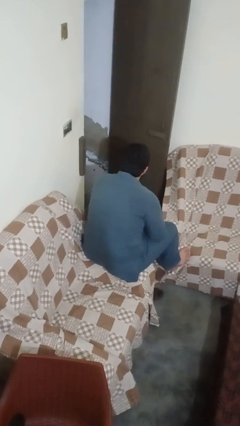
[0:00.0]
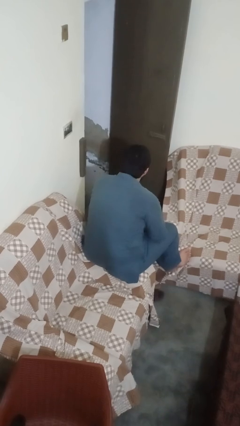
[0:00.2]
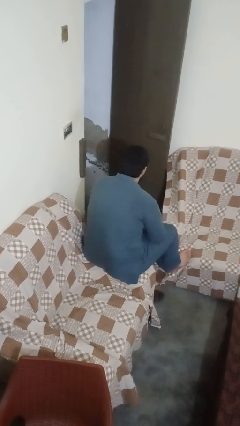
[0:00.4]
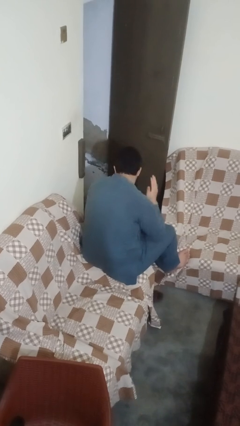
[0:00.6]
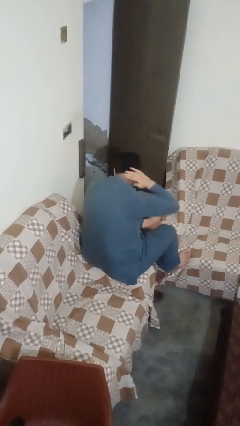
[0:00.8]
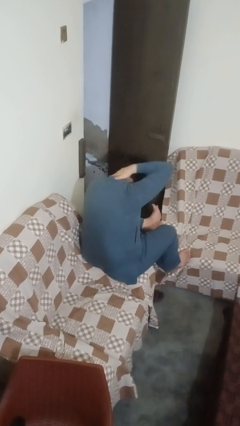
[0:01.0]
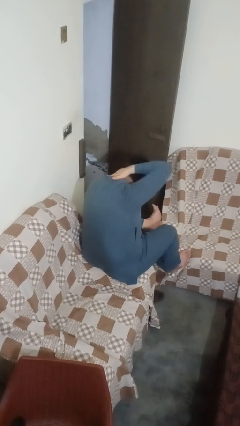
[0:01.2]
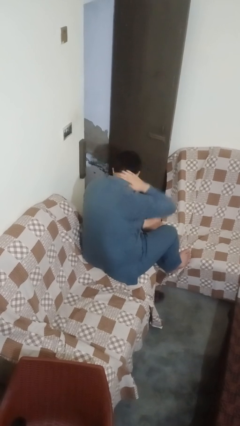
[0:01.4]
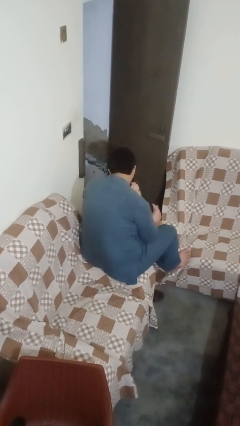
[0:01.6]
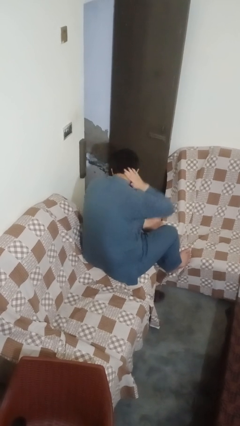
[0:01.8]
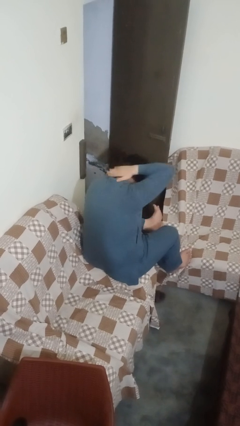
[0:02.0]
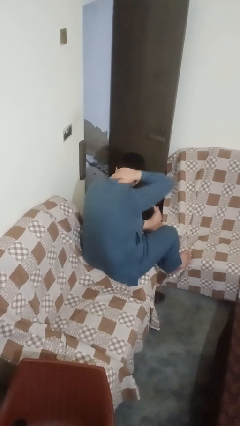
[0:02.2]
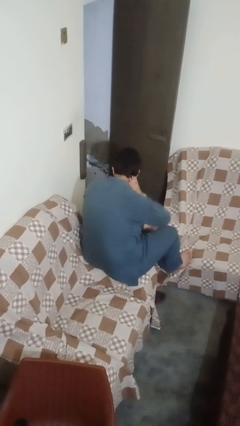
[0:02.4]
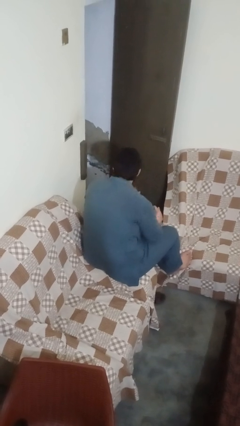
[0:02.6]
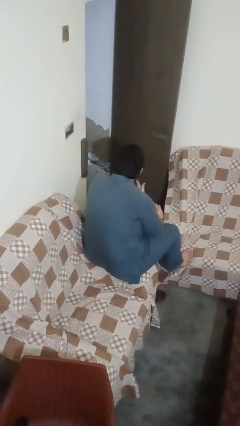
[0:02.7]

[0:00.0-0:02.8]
person rubs neck

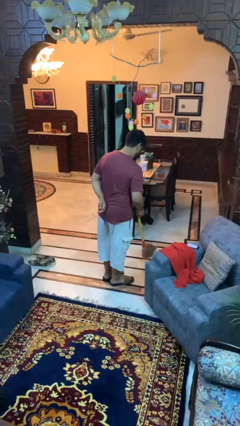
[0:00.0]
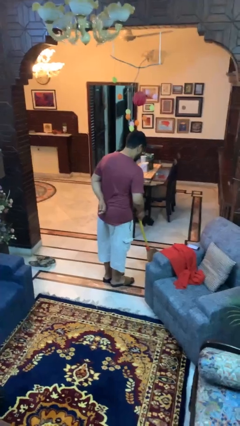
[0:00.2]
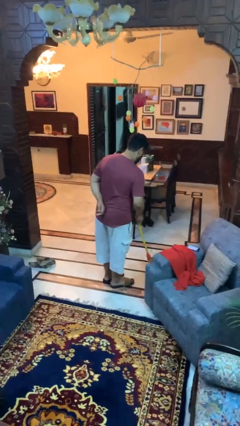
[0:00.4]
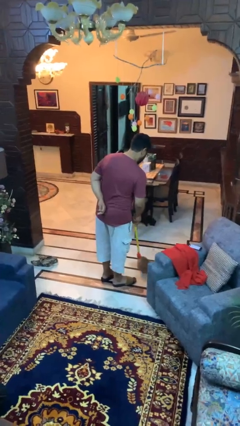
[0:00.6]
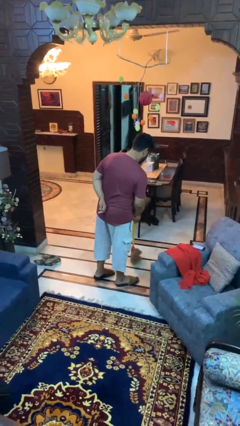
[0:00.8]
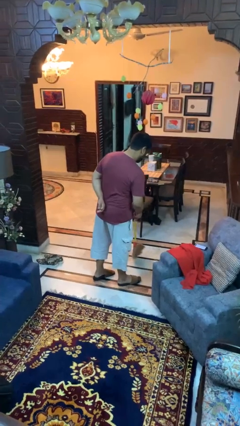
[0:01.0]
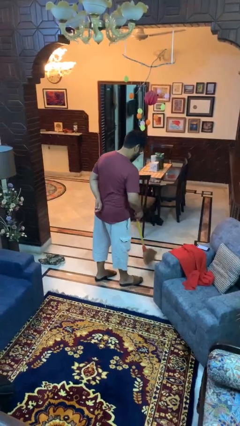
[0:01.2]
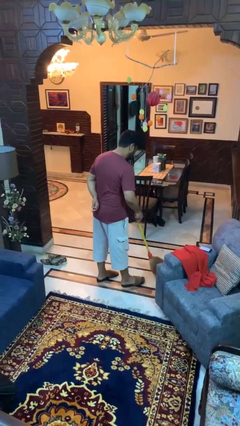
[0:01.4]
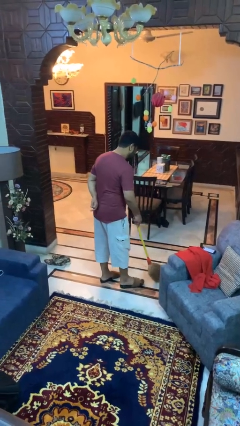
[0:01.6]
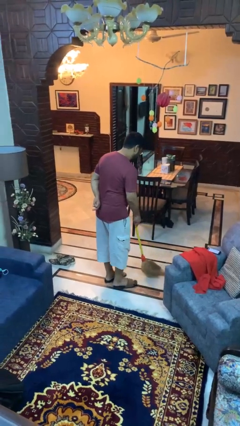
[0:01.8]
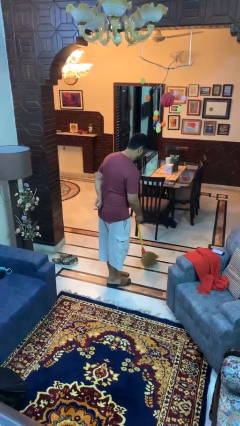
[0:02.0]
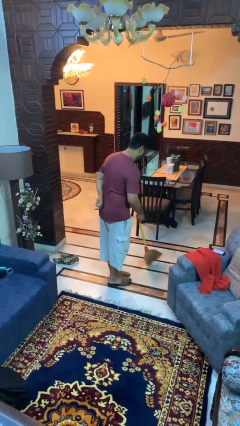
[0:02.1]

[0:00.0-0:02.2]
person sweeps floor

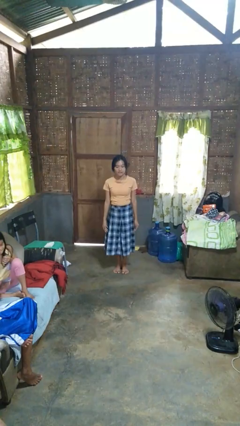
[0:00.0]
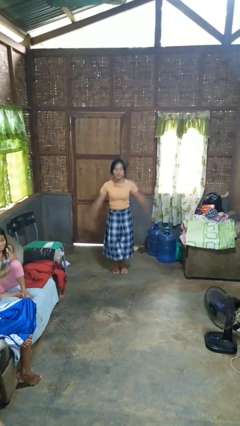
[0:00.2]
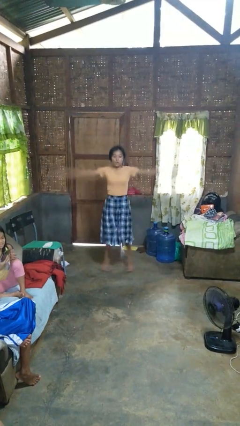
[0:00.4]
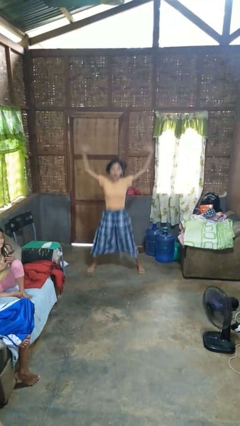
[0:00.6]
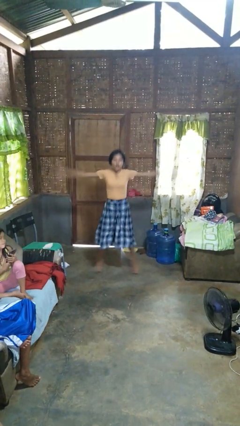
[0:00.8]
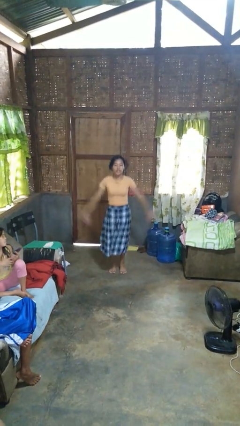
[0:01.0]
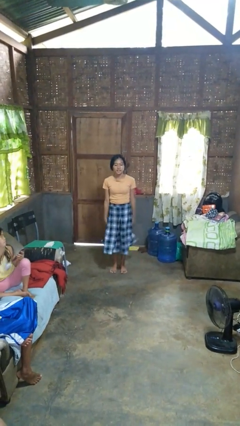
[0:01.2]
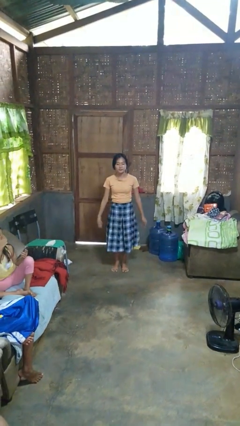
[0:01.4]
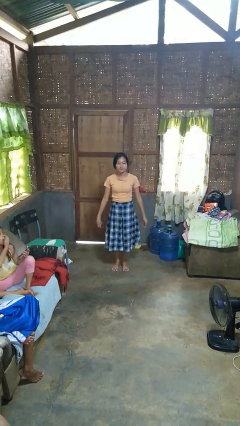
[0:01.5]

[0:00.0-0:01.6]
person exercises with jumping jacks

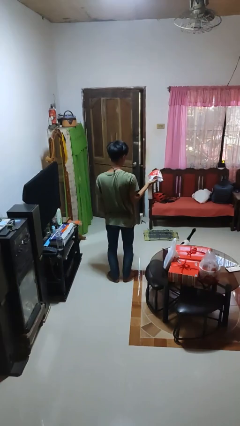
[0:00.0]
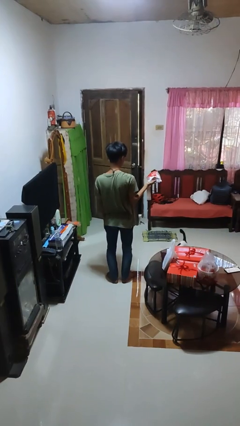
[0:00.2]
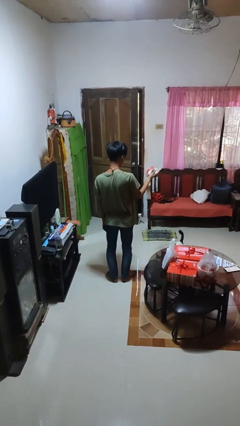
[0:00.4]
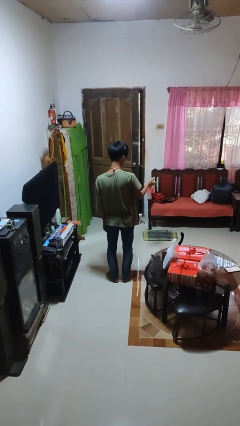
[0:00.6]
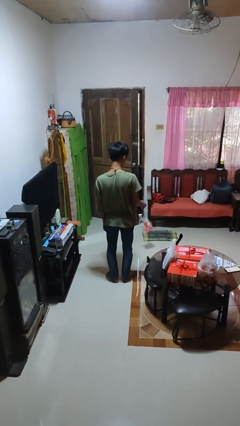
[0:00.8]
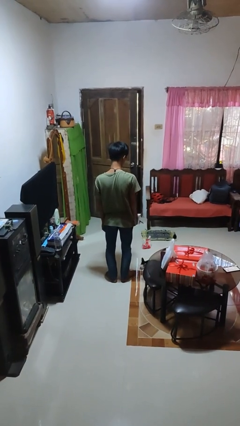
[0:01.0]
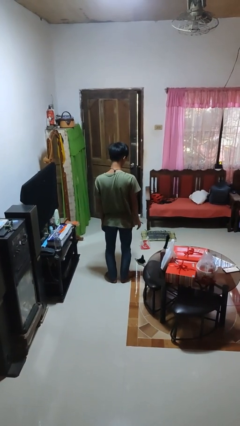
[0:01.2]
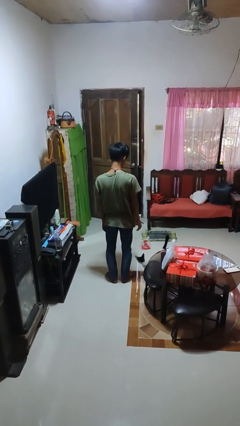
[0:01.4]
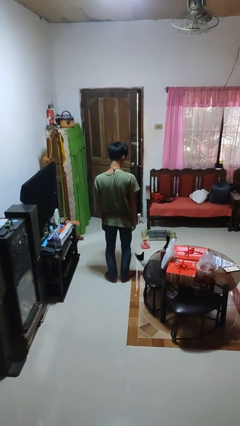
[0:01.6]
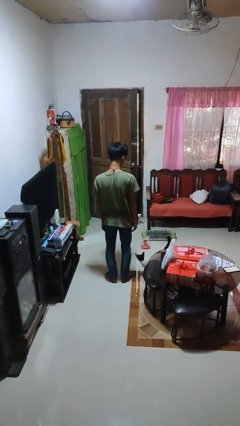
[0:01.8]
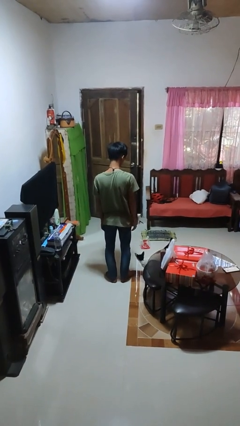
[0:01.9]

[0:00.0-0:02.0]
person throws object to ground

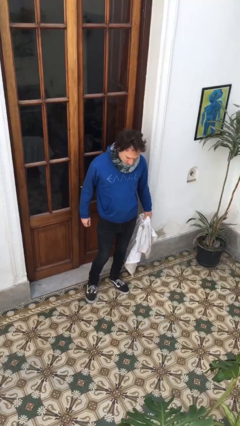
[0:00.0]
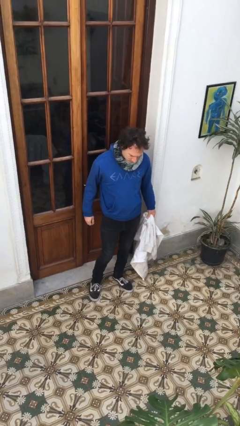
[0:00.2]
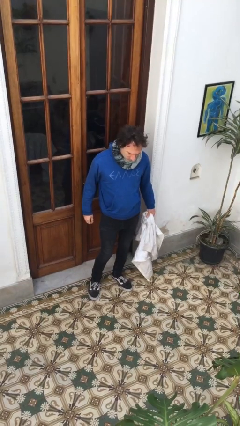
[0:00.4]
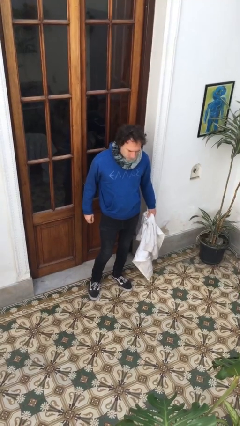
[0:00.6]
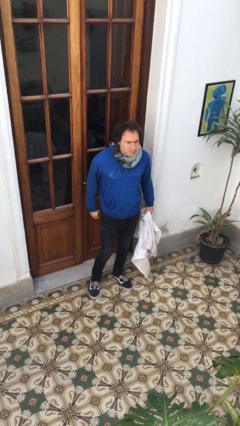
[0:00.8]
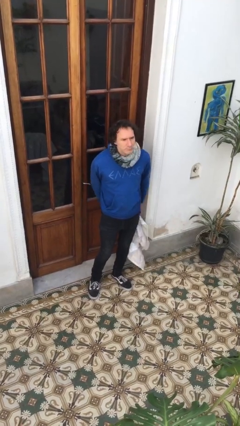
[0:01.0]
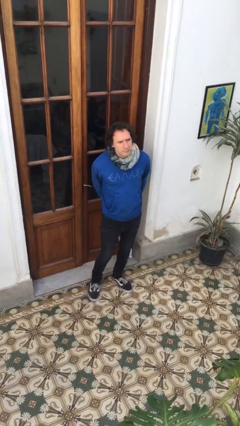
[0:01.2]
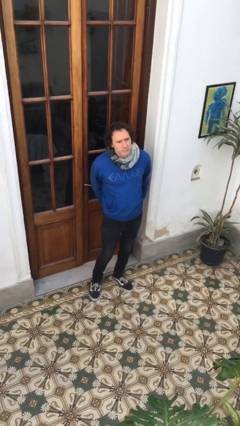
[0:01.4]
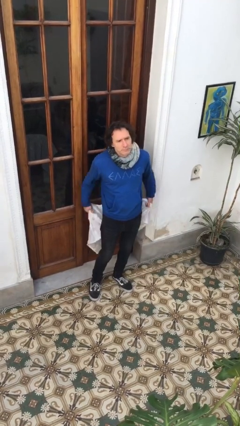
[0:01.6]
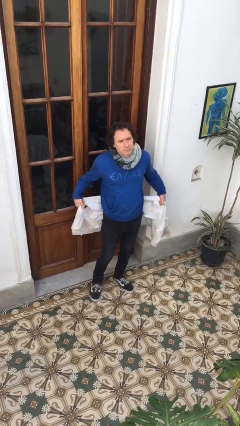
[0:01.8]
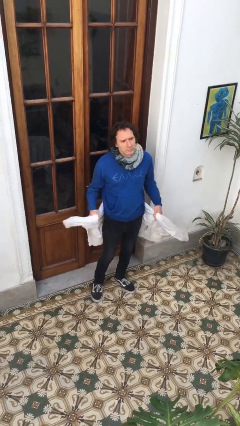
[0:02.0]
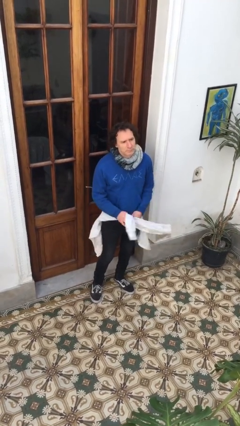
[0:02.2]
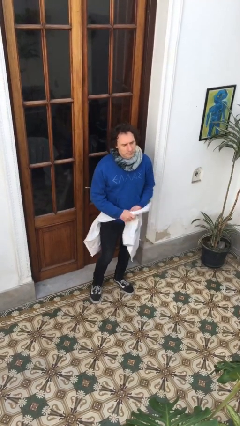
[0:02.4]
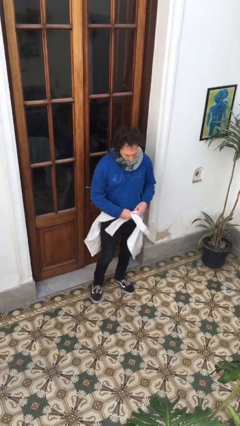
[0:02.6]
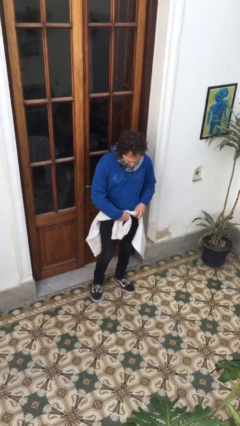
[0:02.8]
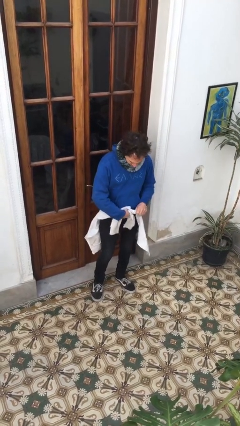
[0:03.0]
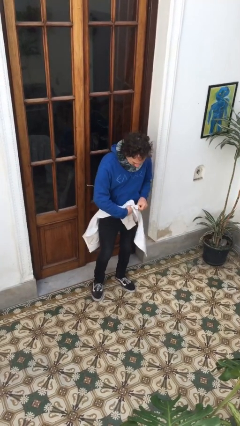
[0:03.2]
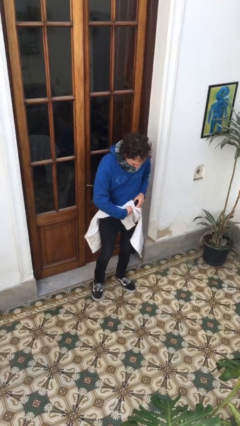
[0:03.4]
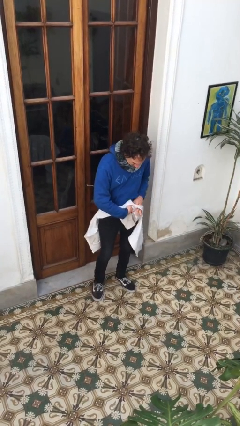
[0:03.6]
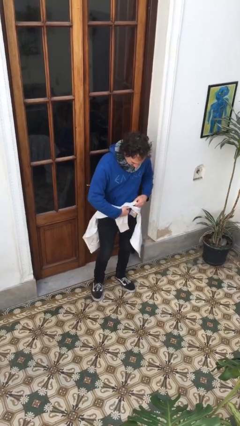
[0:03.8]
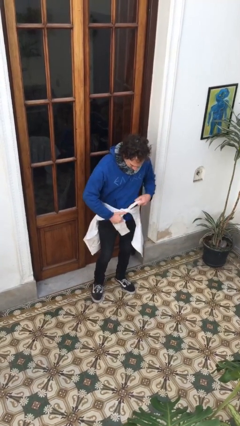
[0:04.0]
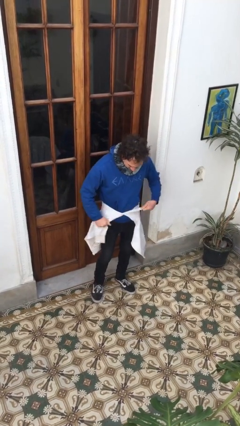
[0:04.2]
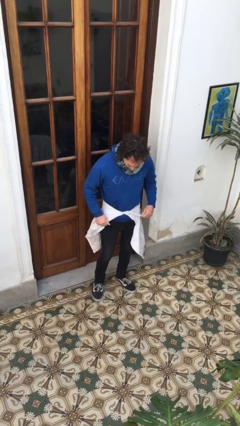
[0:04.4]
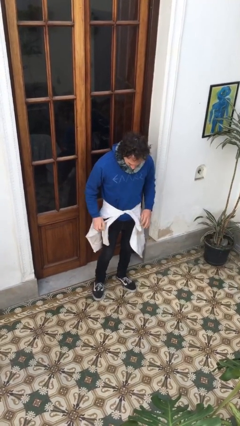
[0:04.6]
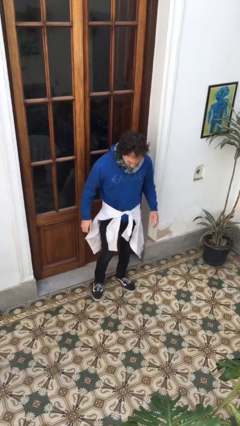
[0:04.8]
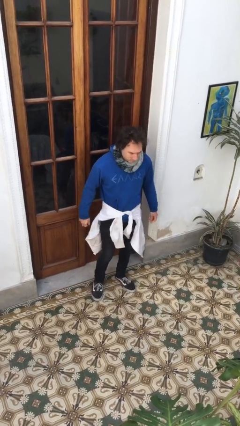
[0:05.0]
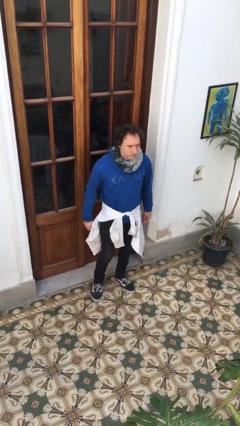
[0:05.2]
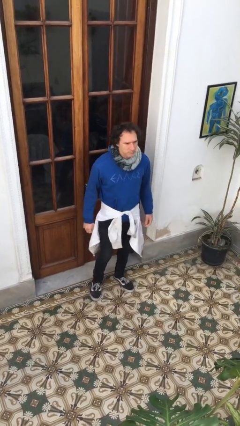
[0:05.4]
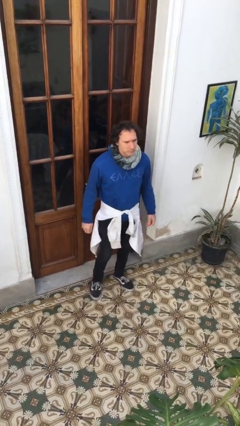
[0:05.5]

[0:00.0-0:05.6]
person ties jacket around waist

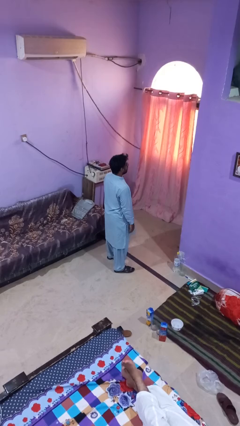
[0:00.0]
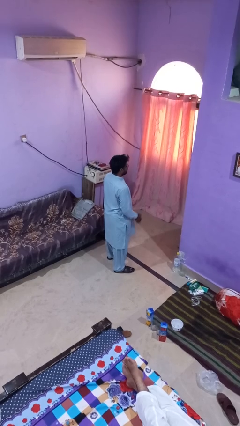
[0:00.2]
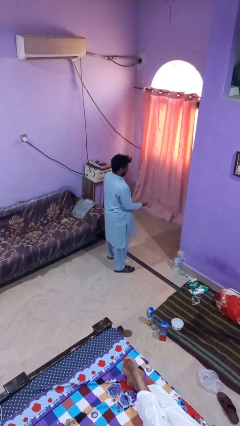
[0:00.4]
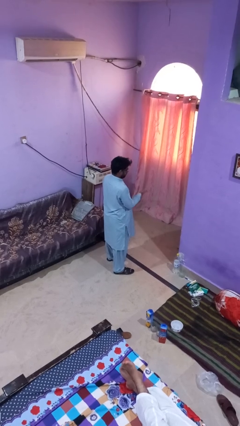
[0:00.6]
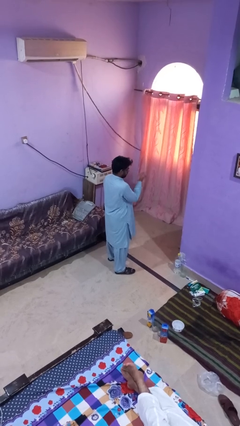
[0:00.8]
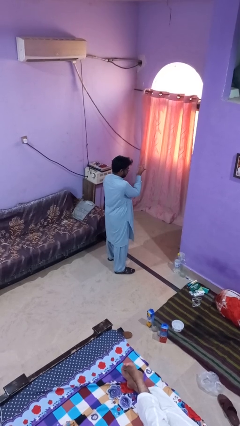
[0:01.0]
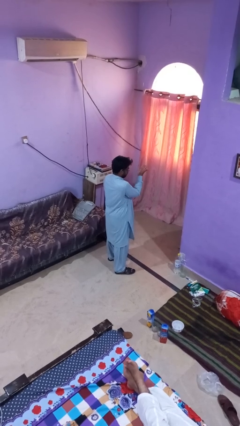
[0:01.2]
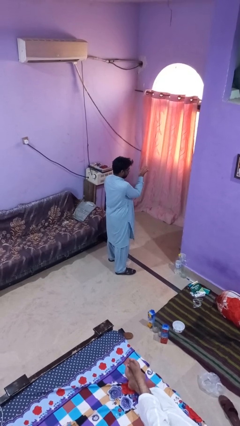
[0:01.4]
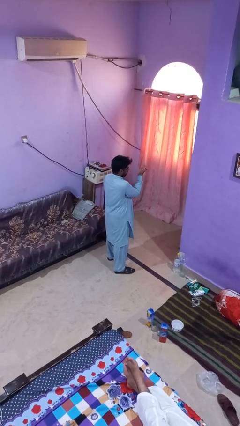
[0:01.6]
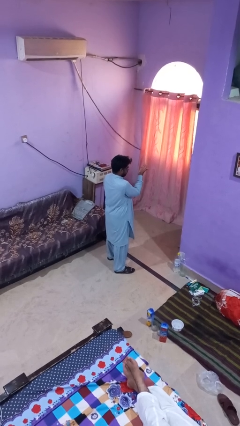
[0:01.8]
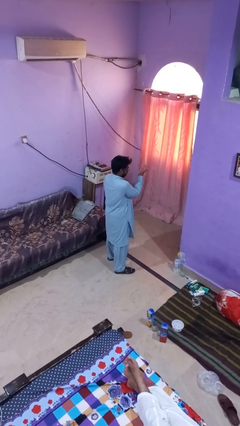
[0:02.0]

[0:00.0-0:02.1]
person gestures swipe up

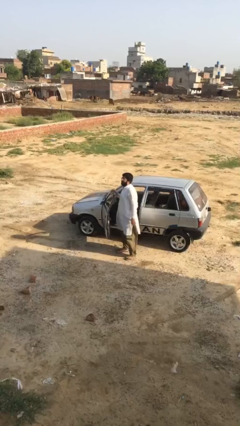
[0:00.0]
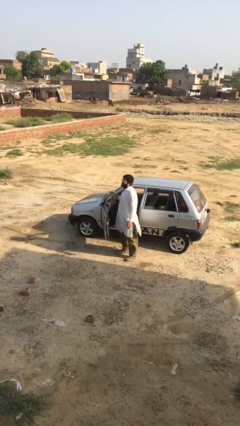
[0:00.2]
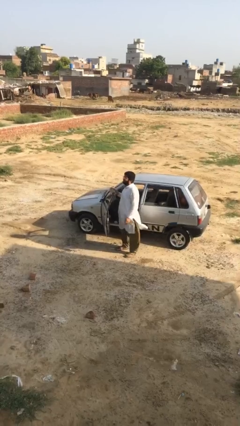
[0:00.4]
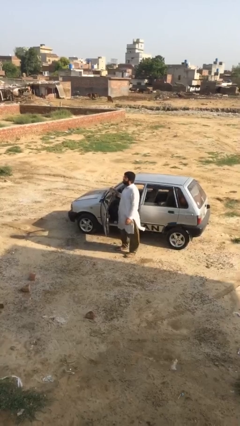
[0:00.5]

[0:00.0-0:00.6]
person closes car door

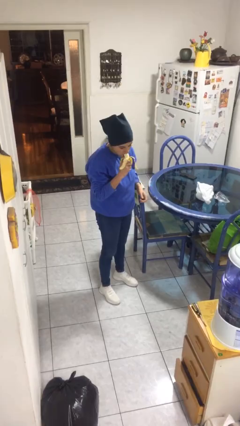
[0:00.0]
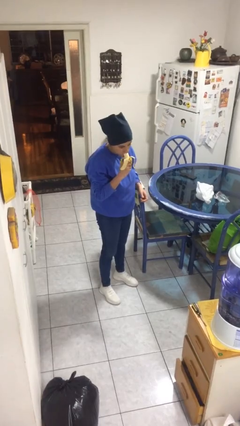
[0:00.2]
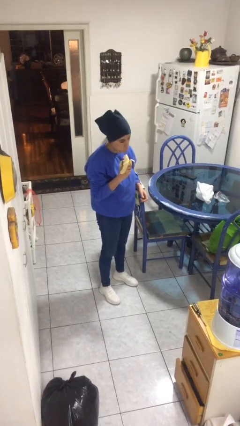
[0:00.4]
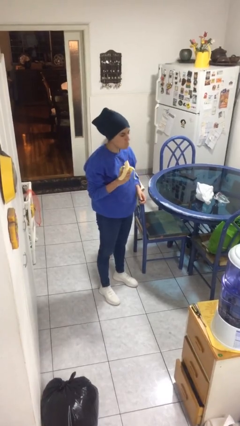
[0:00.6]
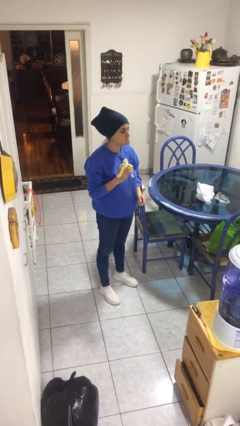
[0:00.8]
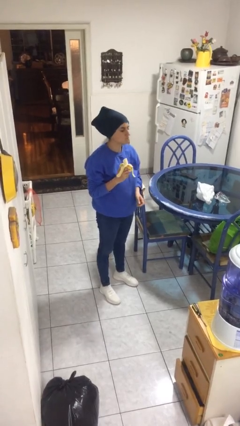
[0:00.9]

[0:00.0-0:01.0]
person eats banana
